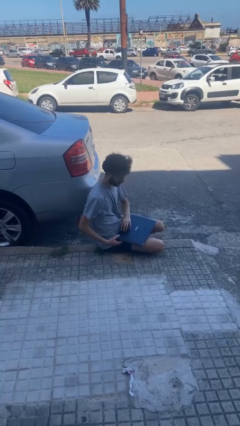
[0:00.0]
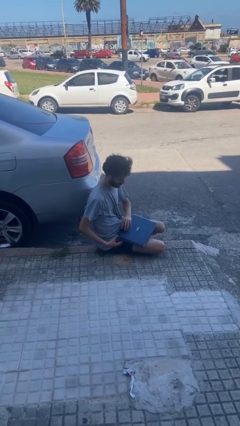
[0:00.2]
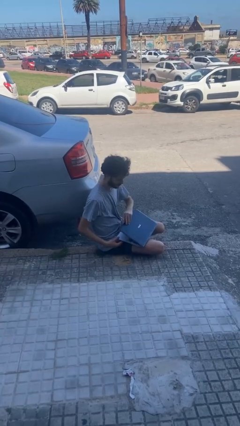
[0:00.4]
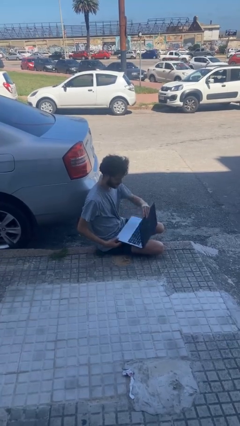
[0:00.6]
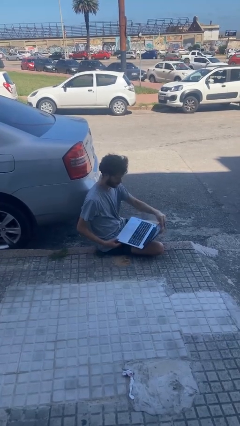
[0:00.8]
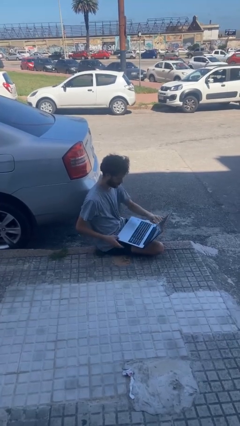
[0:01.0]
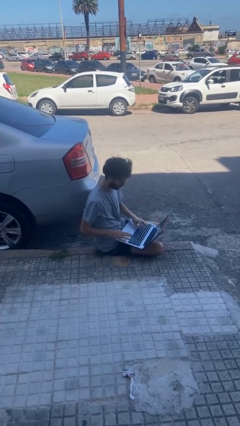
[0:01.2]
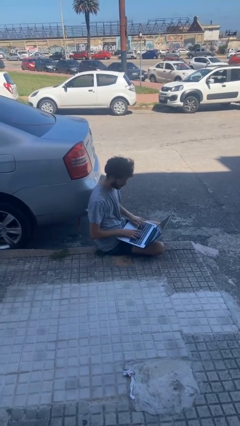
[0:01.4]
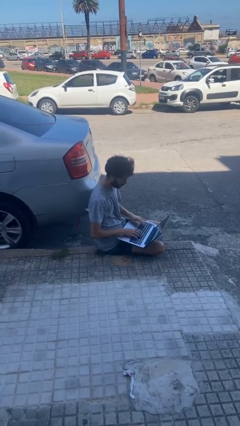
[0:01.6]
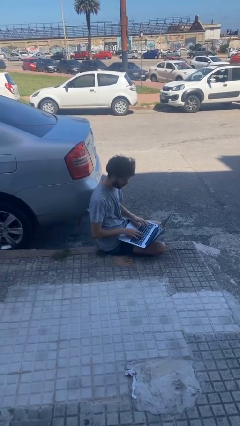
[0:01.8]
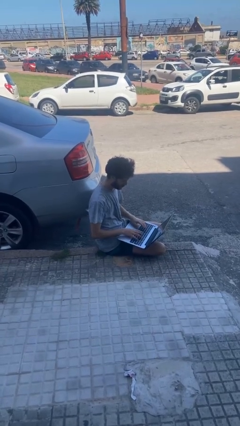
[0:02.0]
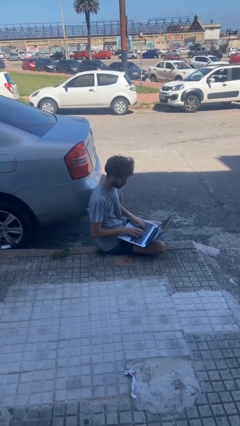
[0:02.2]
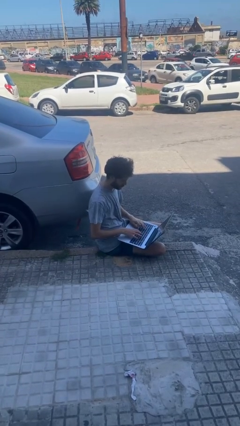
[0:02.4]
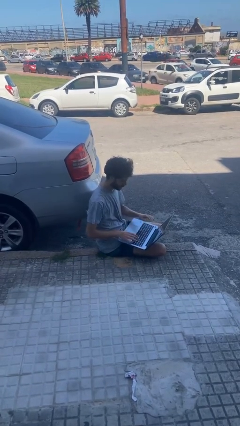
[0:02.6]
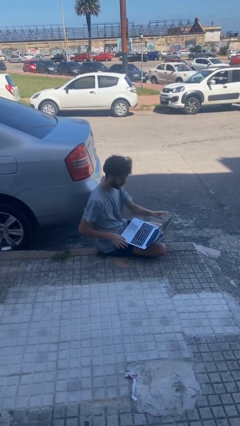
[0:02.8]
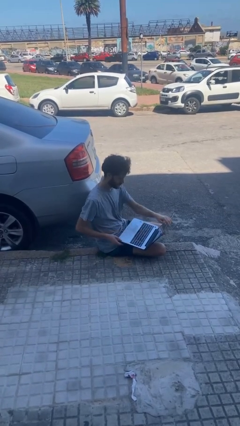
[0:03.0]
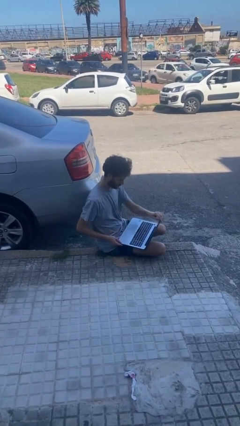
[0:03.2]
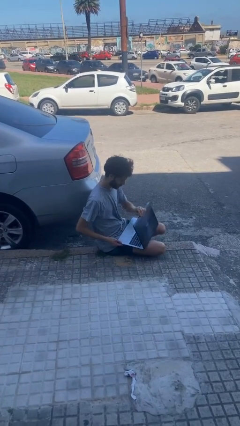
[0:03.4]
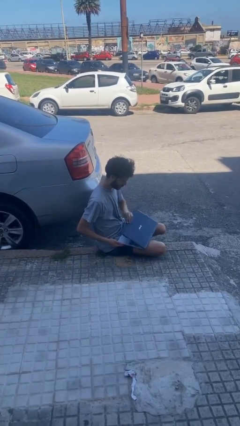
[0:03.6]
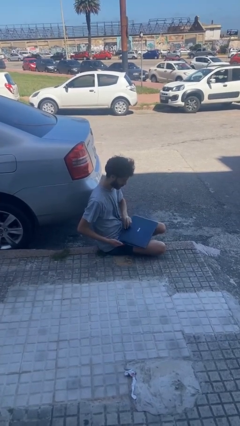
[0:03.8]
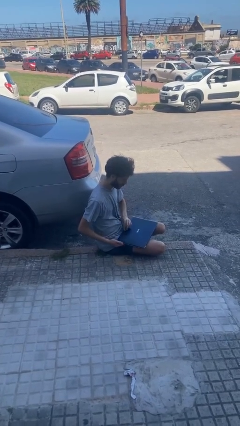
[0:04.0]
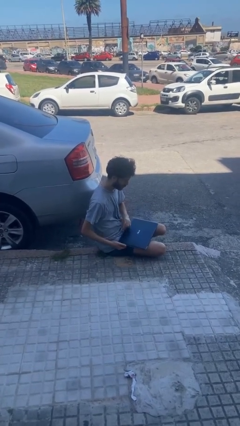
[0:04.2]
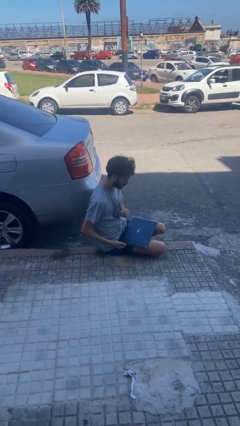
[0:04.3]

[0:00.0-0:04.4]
person interacts with laptop

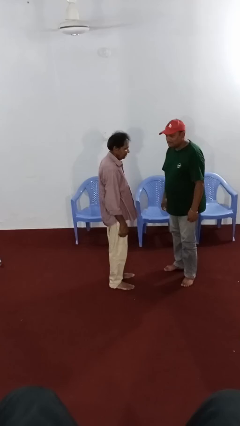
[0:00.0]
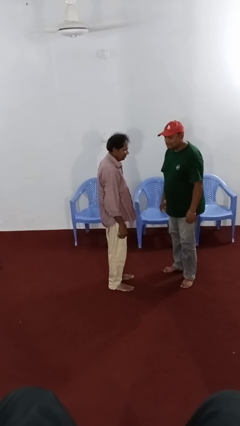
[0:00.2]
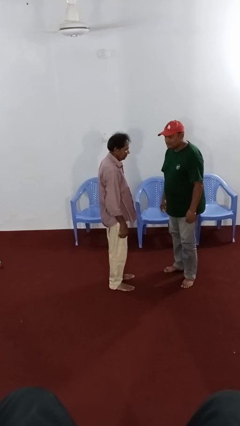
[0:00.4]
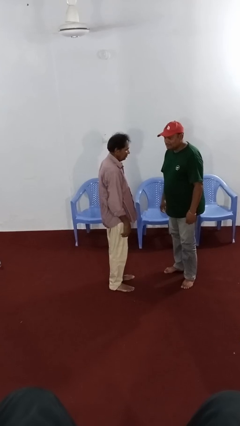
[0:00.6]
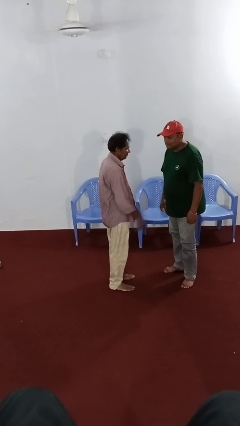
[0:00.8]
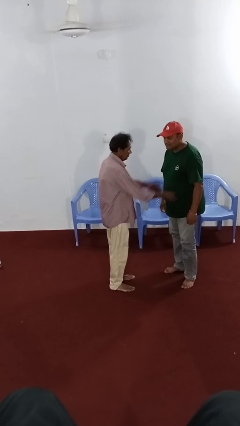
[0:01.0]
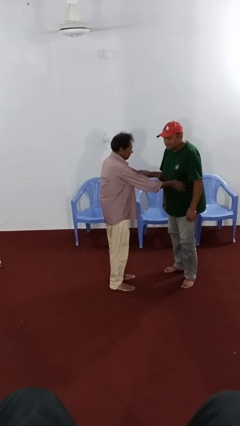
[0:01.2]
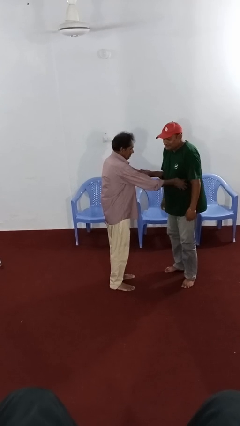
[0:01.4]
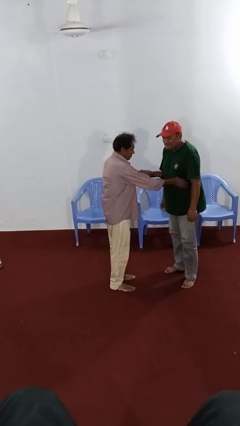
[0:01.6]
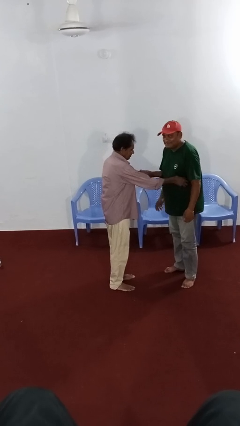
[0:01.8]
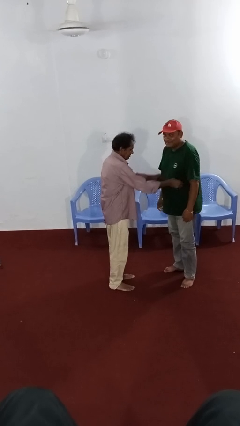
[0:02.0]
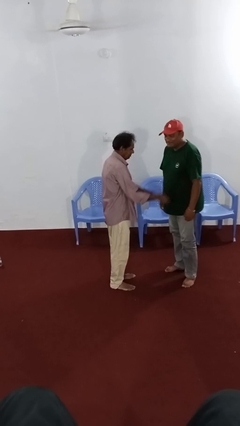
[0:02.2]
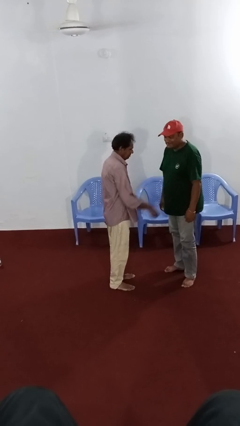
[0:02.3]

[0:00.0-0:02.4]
person tickles person

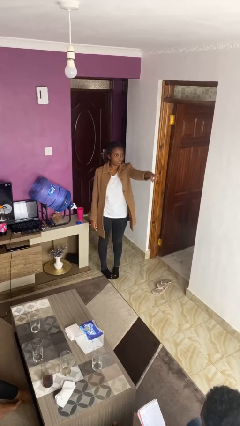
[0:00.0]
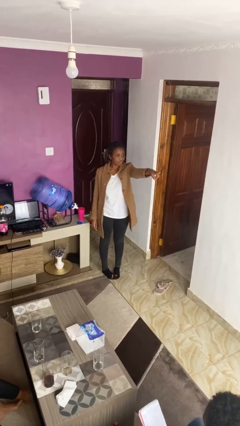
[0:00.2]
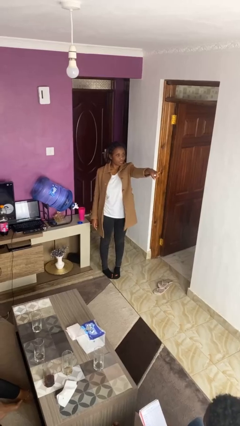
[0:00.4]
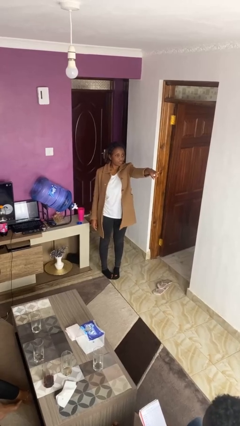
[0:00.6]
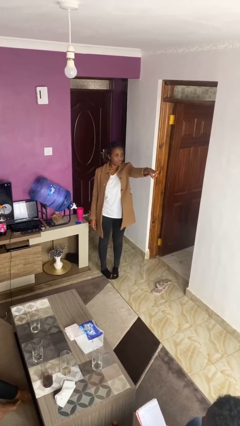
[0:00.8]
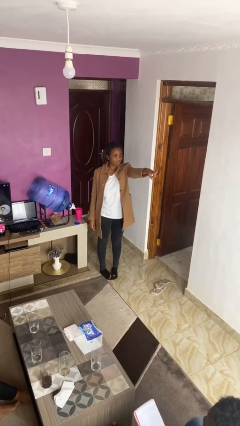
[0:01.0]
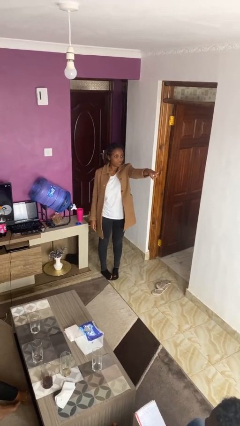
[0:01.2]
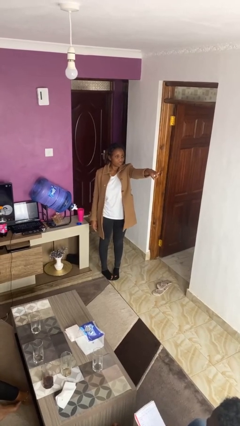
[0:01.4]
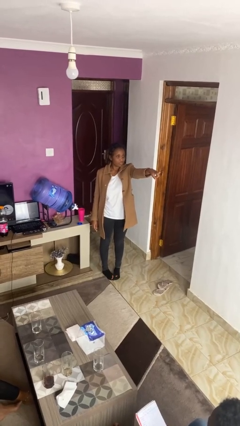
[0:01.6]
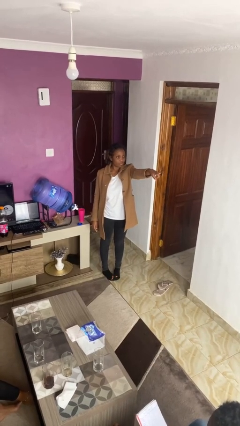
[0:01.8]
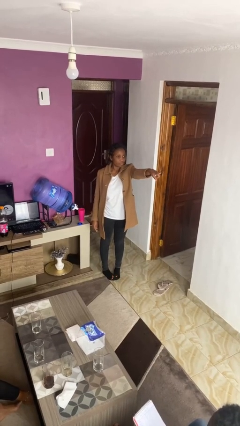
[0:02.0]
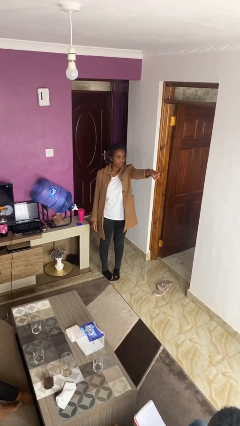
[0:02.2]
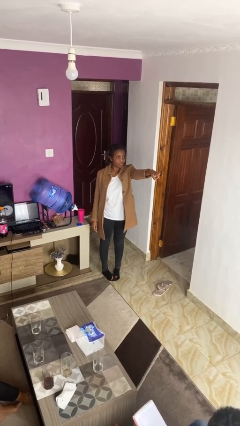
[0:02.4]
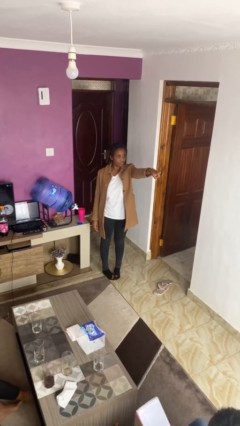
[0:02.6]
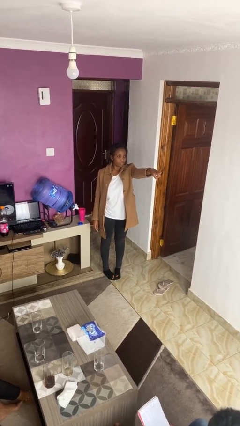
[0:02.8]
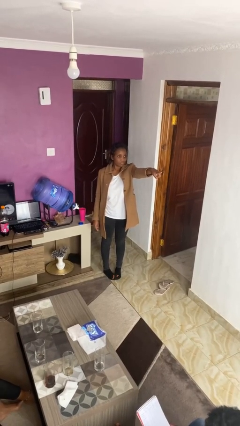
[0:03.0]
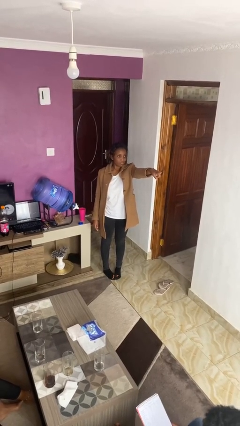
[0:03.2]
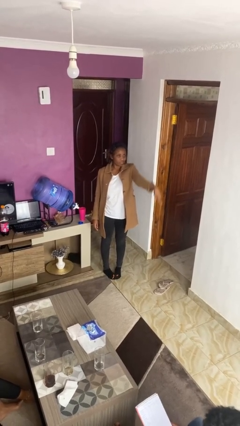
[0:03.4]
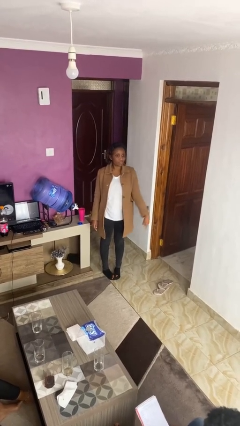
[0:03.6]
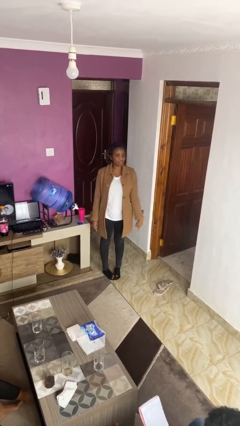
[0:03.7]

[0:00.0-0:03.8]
person points at person

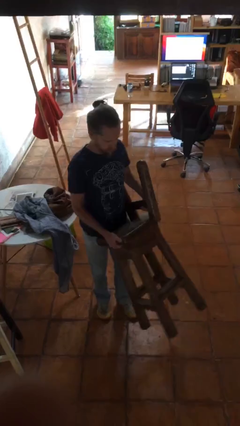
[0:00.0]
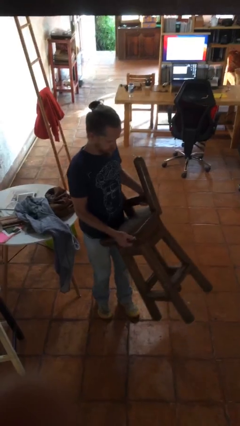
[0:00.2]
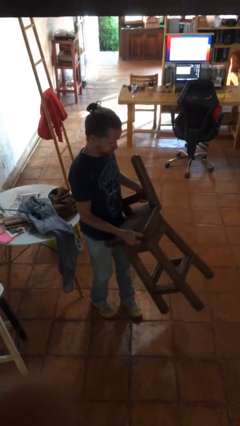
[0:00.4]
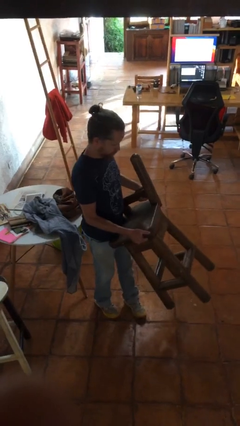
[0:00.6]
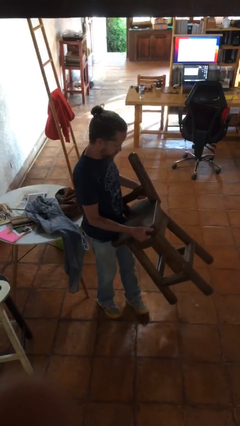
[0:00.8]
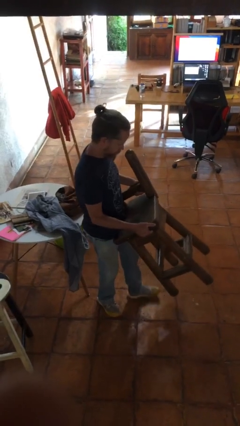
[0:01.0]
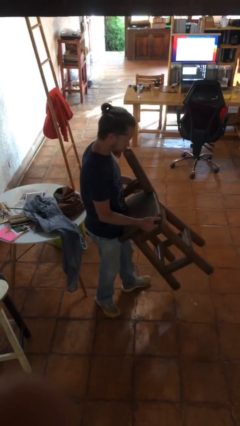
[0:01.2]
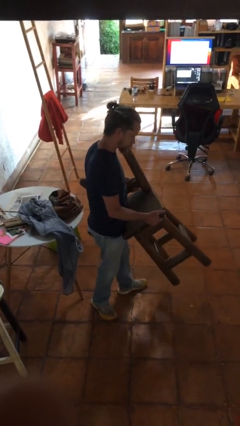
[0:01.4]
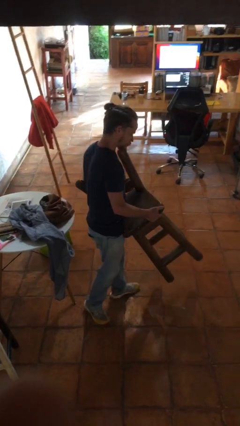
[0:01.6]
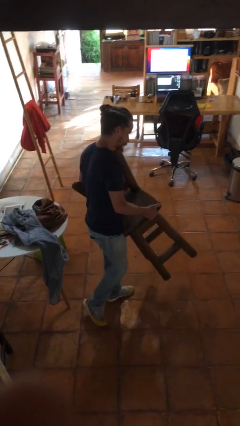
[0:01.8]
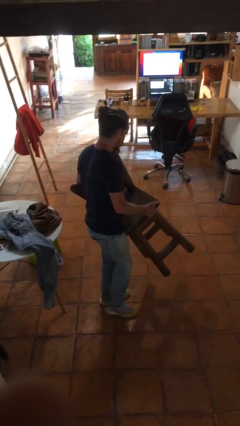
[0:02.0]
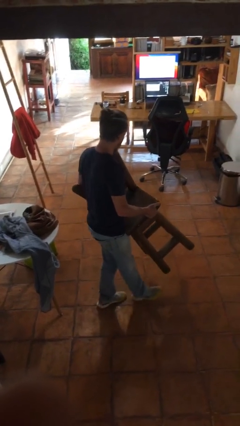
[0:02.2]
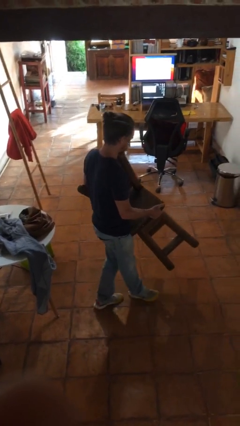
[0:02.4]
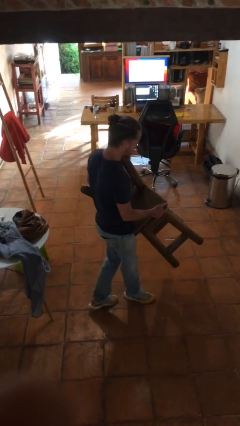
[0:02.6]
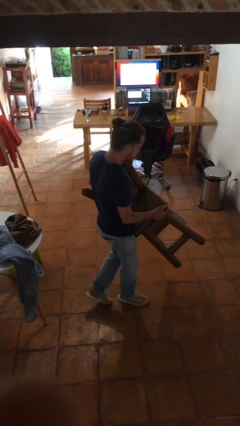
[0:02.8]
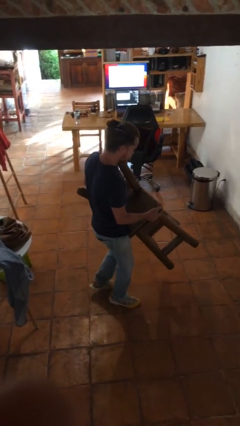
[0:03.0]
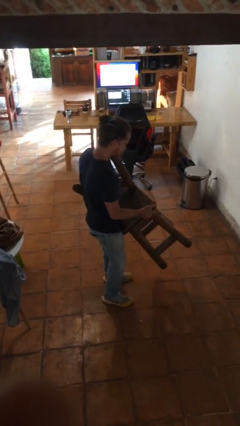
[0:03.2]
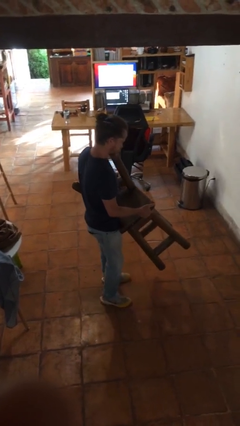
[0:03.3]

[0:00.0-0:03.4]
person carries furniture

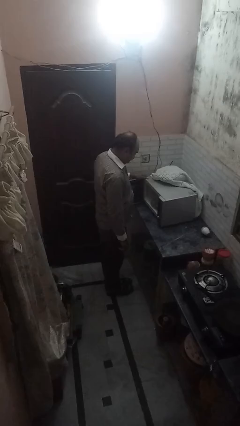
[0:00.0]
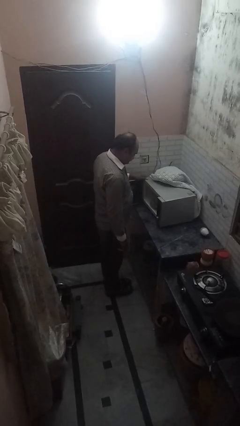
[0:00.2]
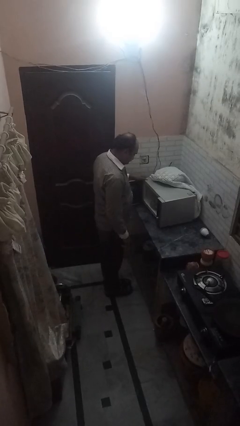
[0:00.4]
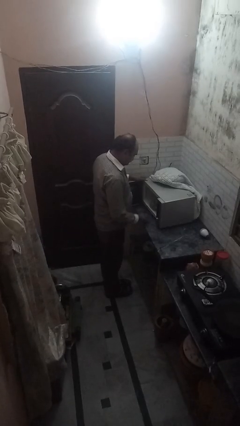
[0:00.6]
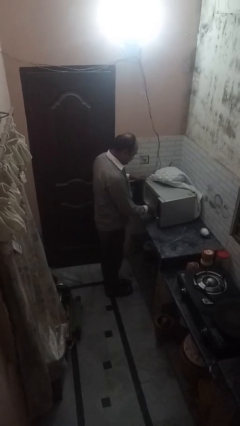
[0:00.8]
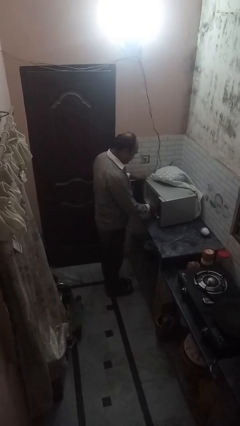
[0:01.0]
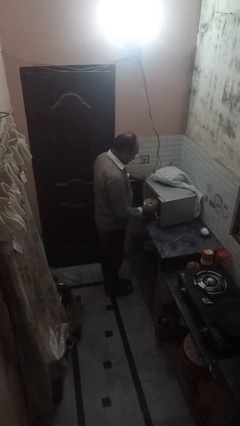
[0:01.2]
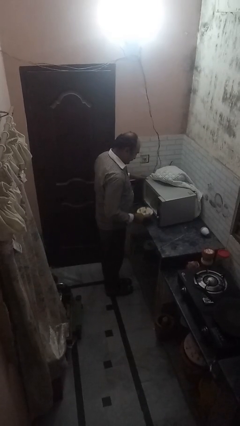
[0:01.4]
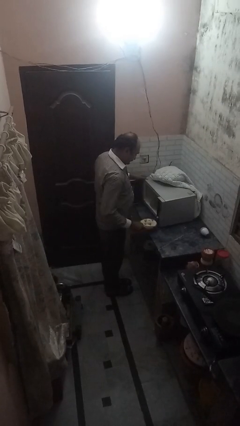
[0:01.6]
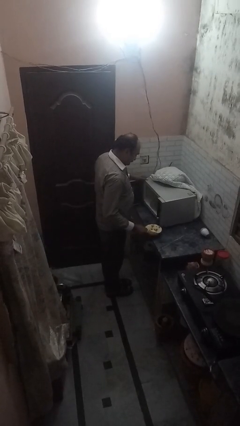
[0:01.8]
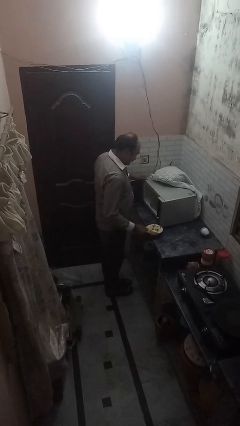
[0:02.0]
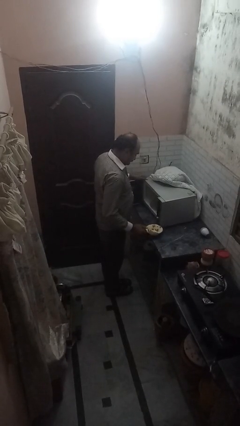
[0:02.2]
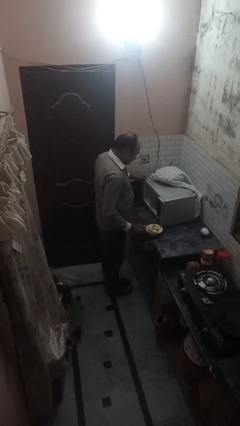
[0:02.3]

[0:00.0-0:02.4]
person takes object from microwave

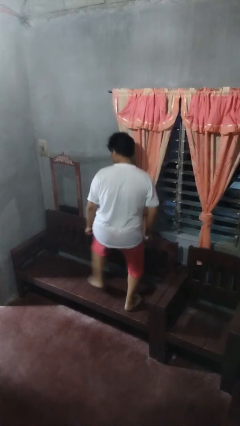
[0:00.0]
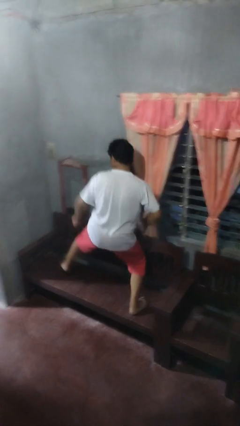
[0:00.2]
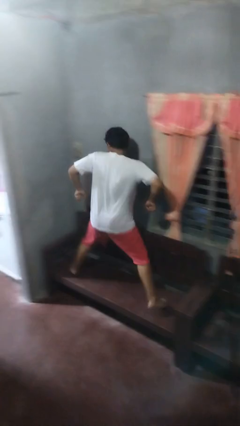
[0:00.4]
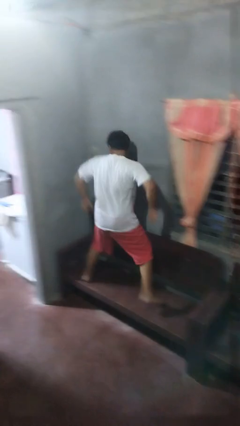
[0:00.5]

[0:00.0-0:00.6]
person jumps on couch
